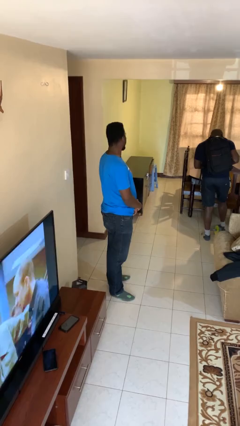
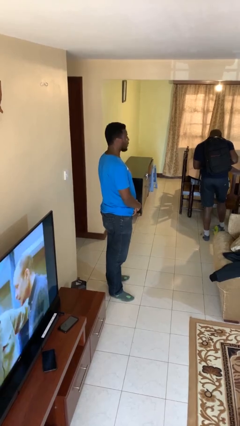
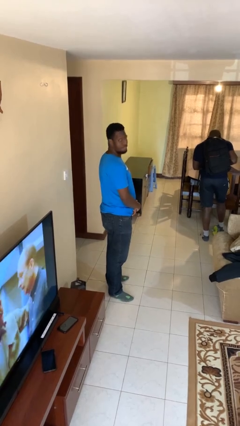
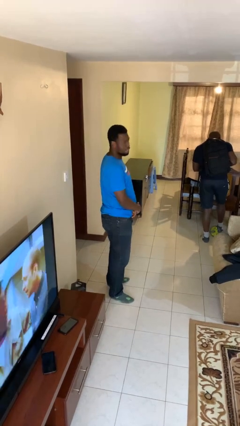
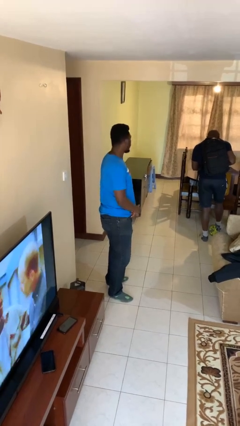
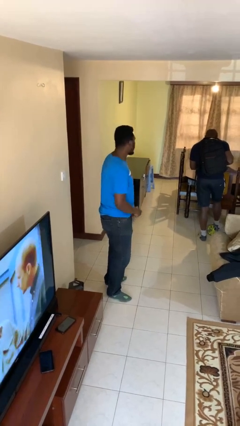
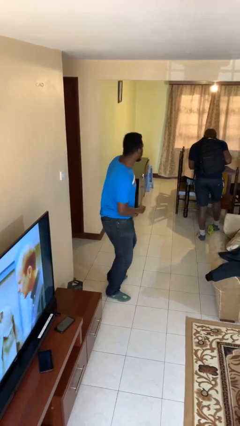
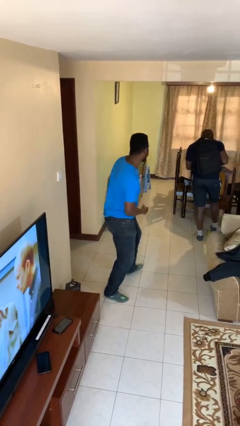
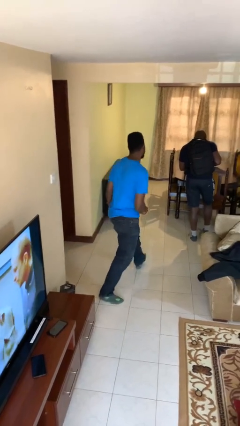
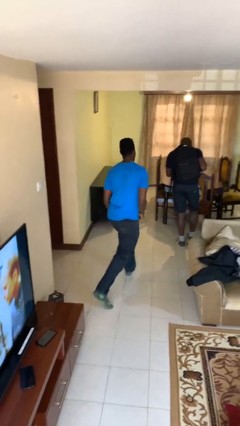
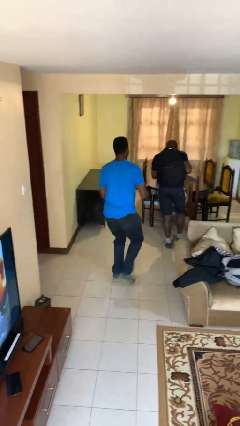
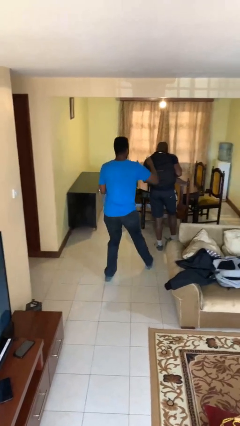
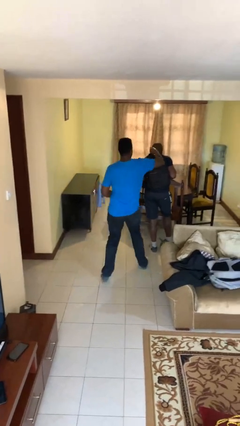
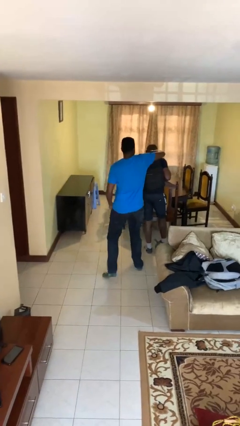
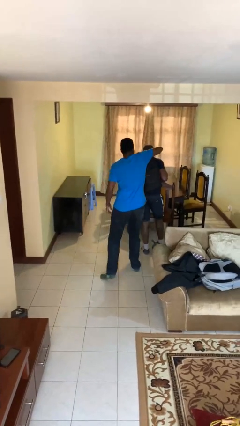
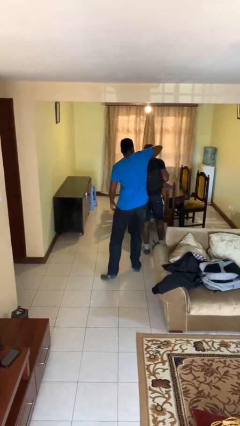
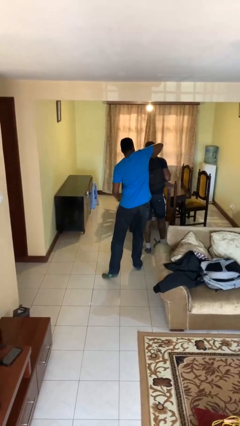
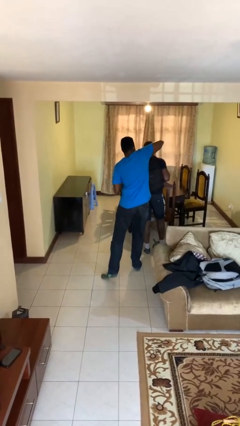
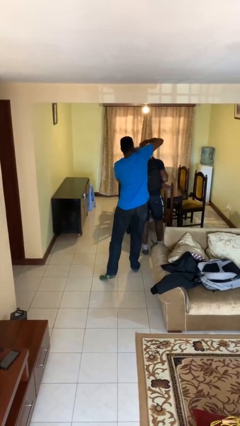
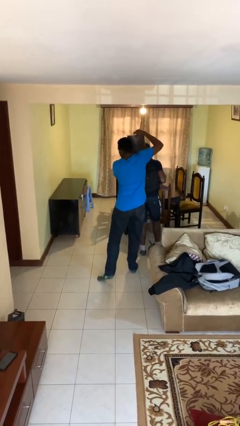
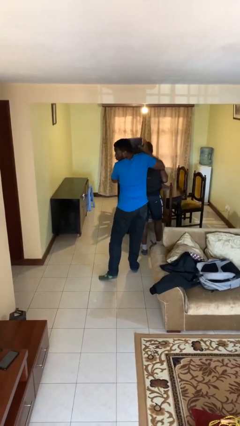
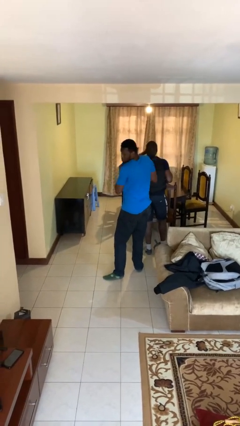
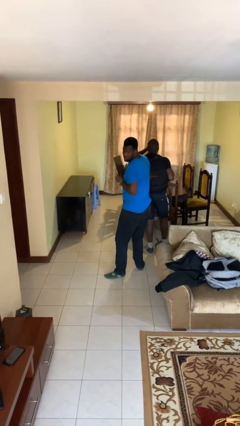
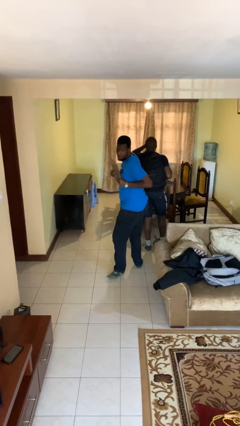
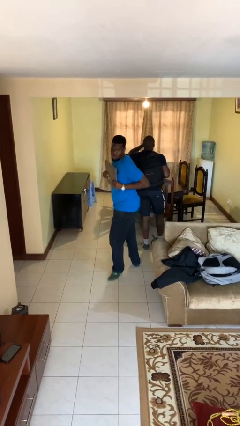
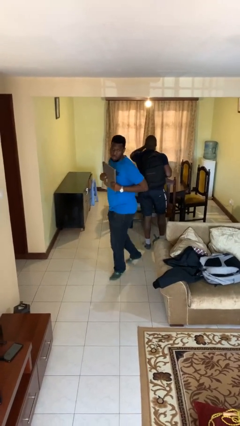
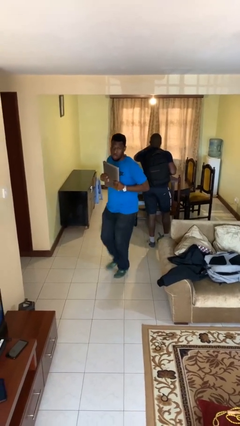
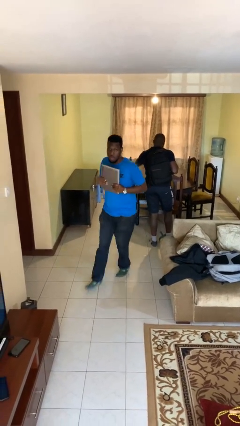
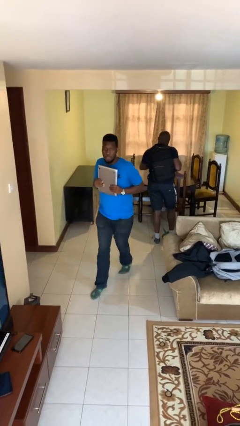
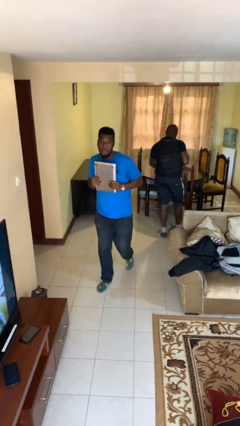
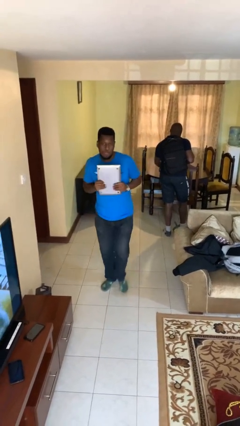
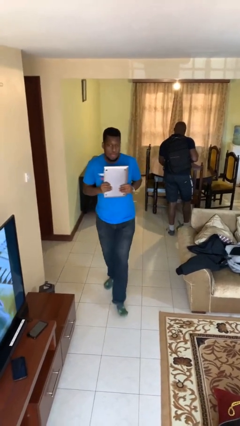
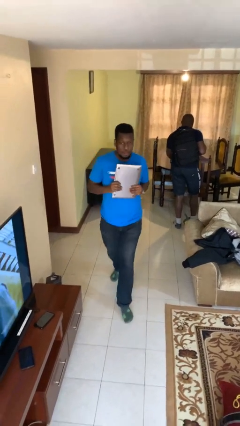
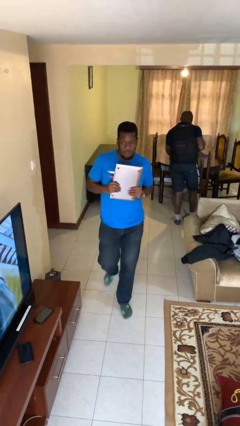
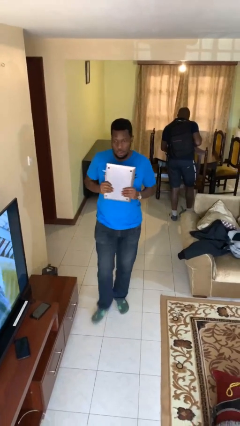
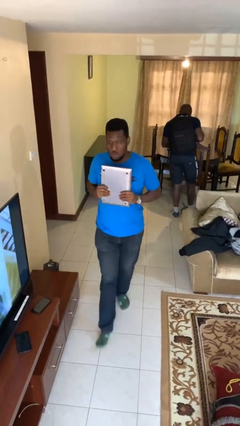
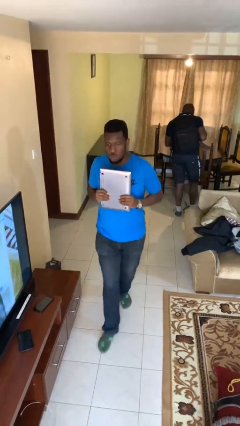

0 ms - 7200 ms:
person steals object from person

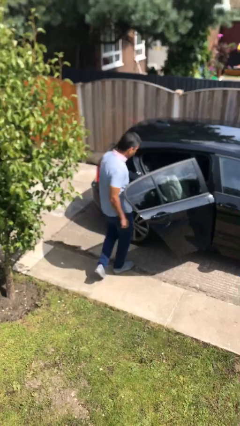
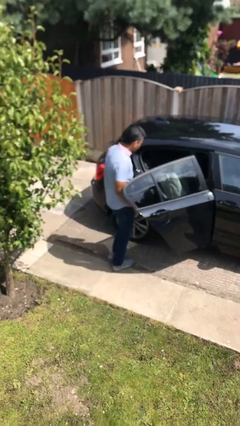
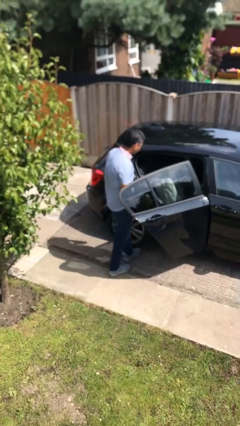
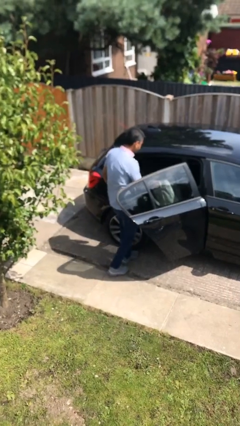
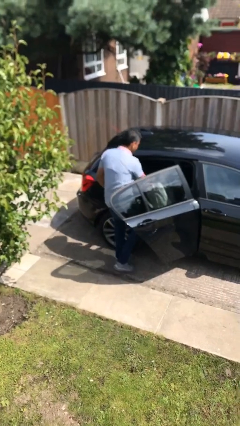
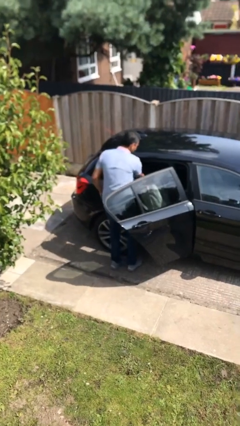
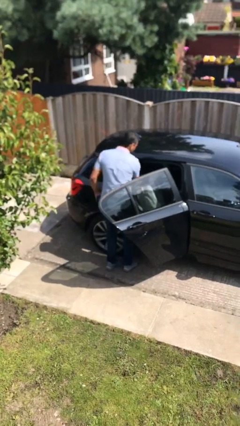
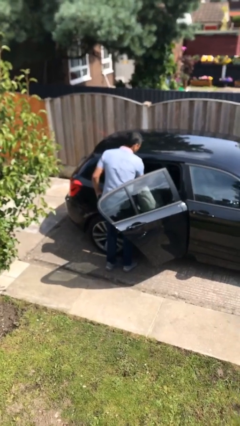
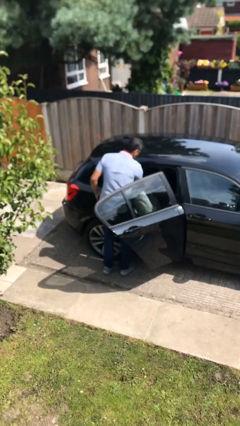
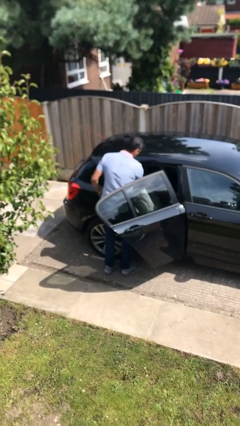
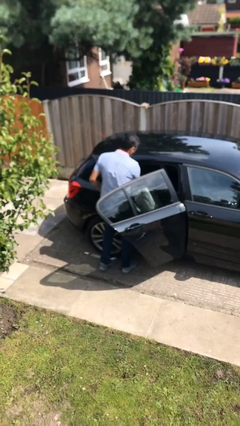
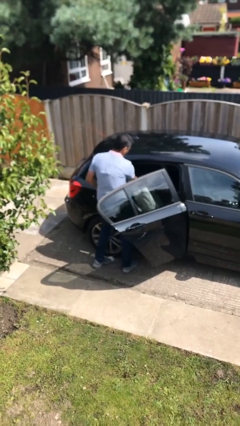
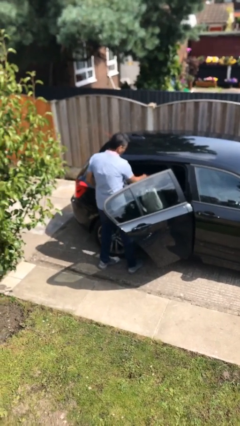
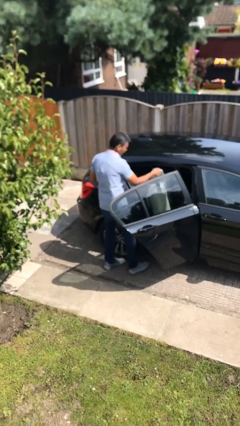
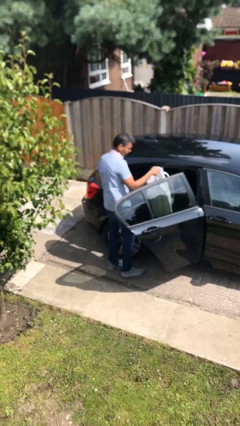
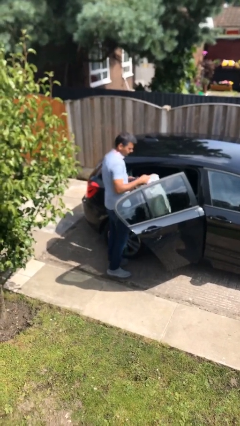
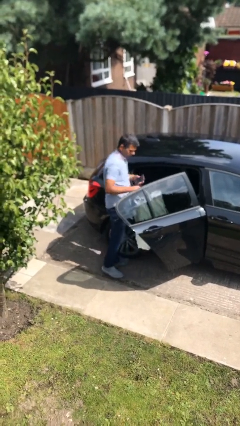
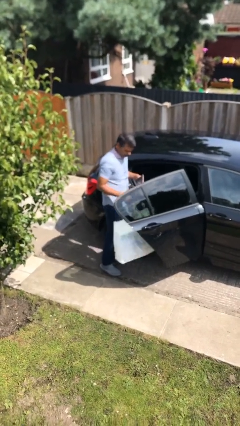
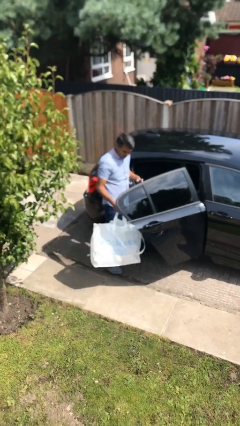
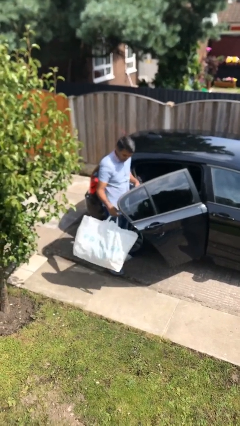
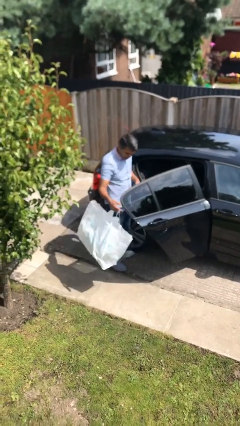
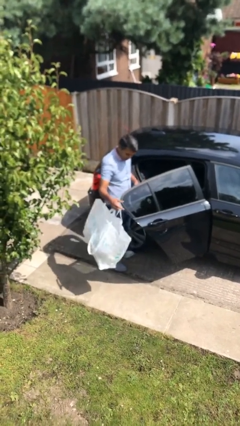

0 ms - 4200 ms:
person unloads car

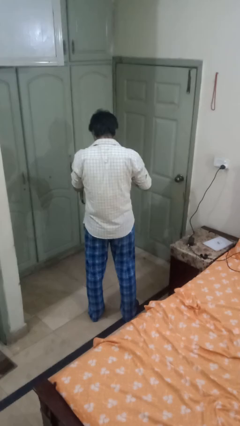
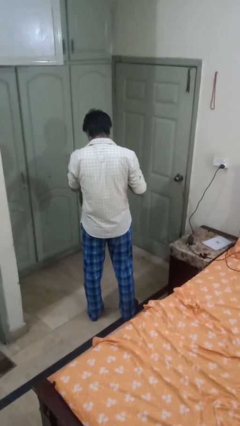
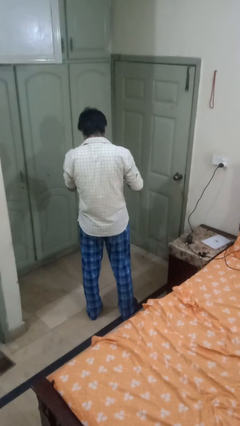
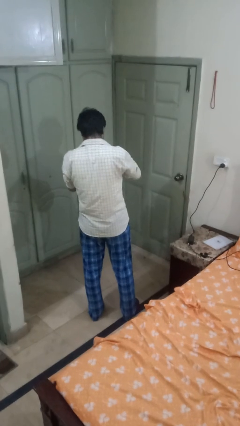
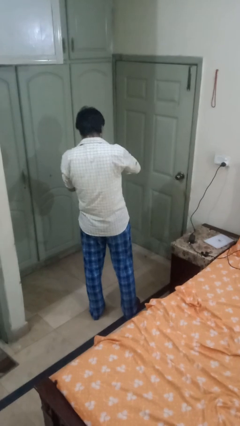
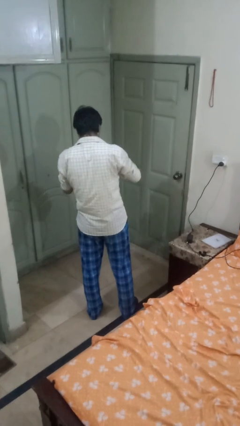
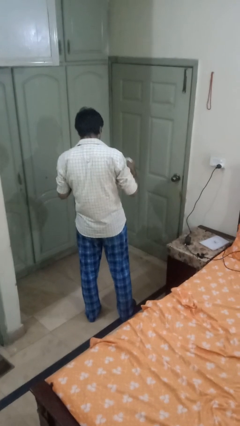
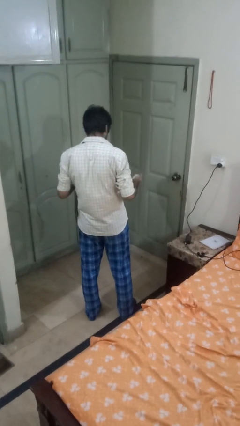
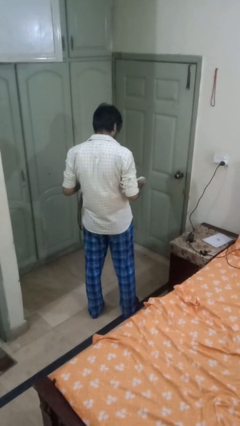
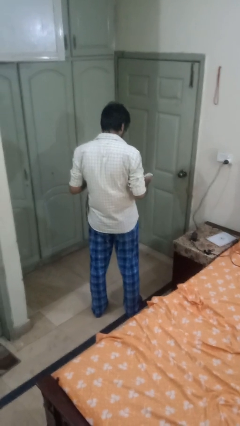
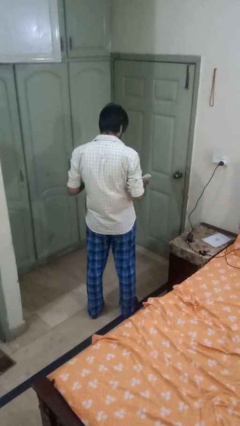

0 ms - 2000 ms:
person takes object from purse

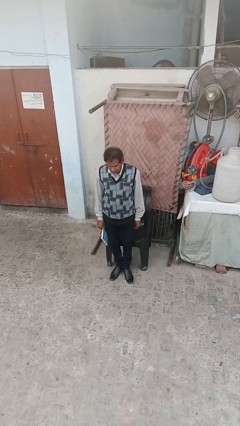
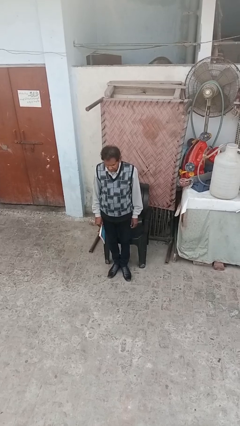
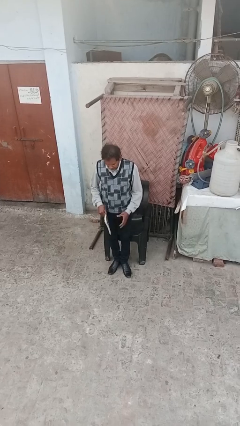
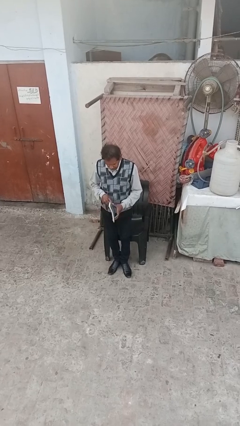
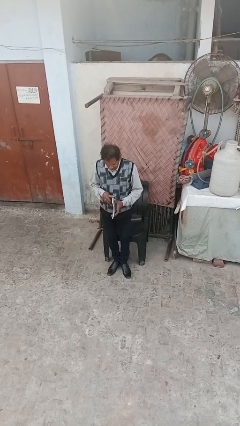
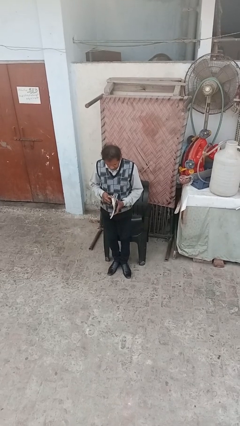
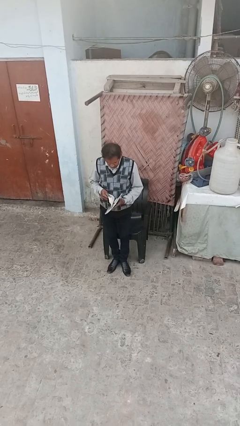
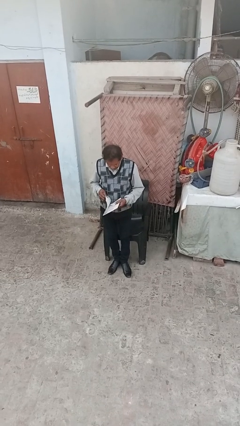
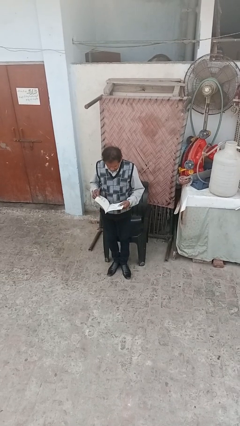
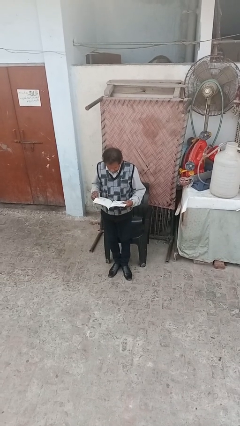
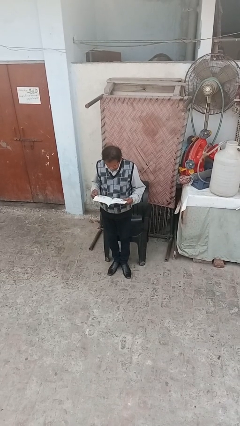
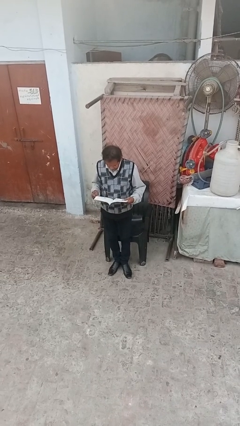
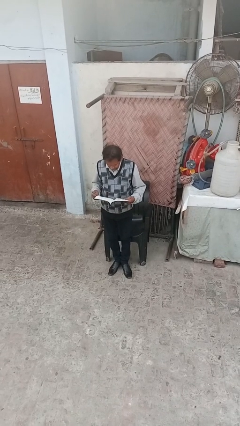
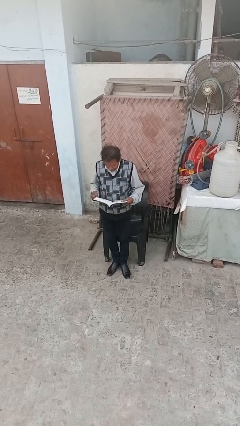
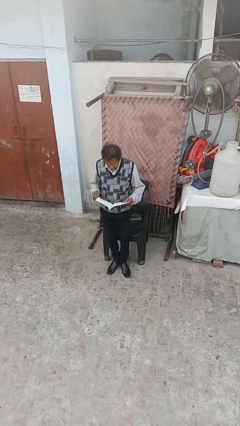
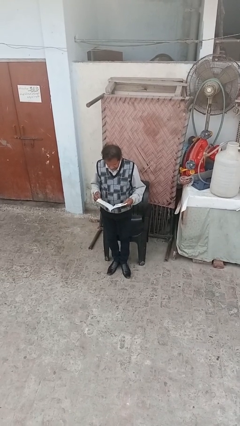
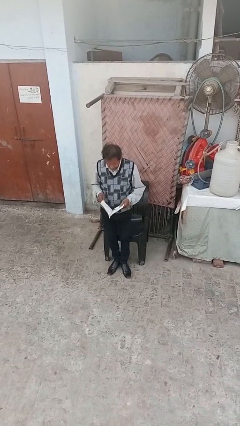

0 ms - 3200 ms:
person reads document

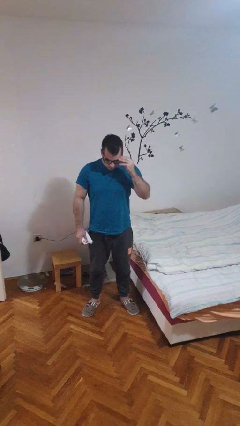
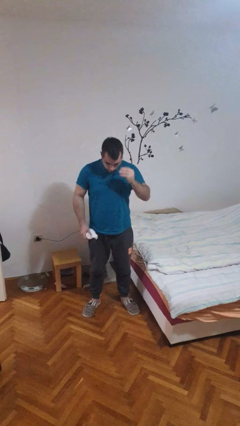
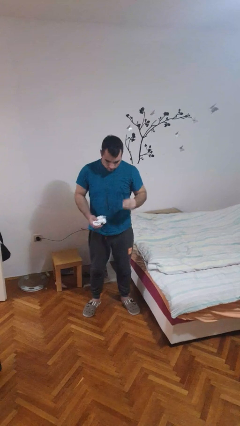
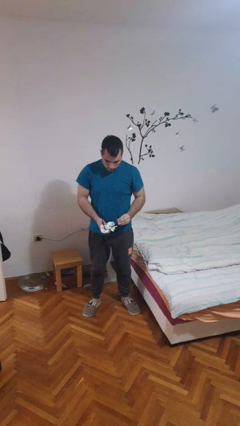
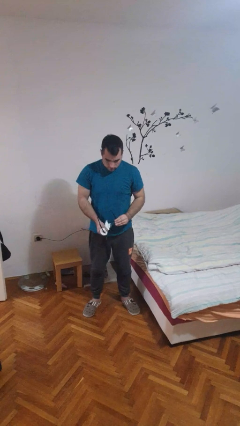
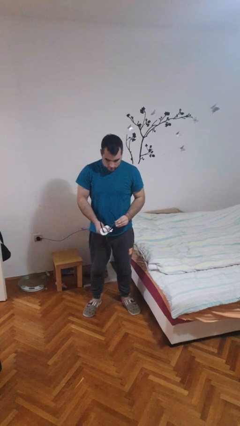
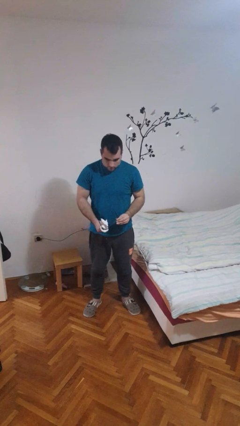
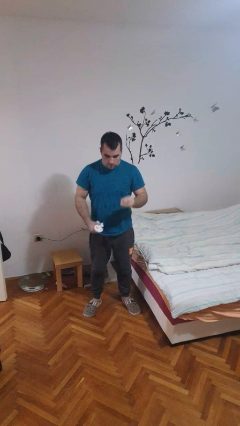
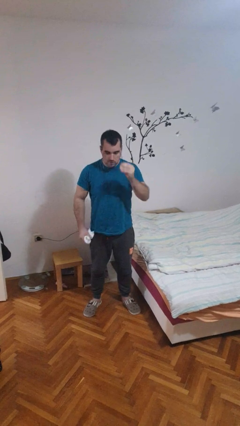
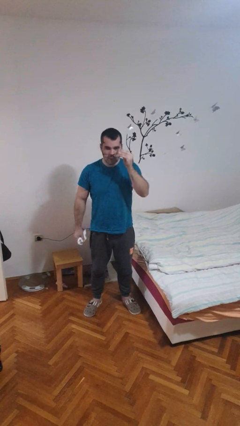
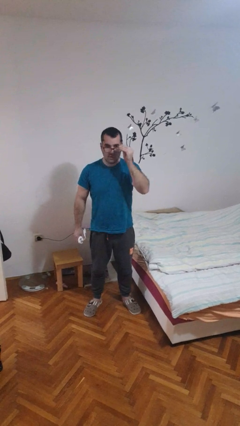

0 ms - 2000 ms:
person cleans eyeglasses
